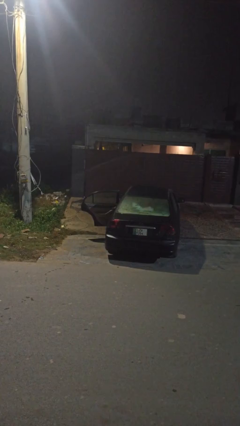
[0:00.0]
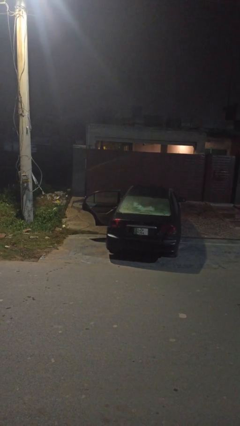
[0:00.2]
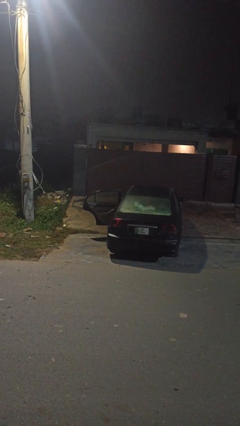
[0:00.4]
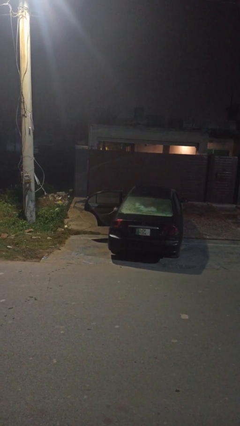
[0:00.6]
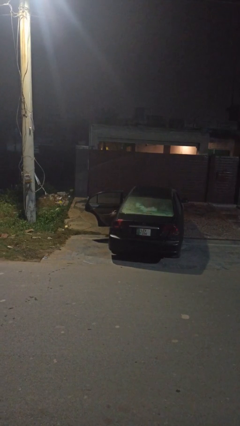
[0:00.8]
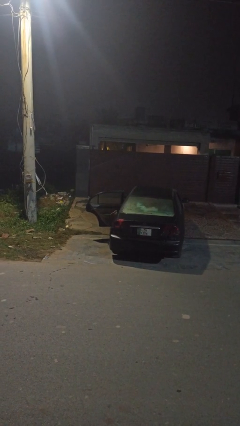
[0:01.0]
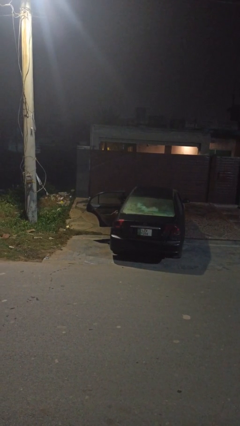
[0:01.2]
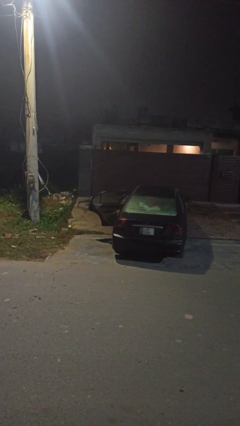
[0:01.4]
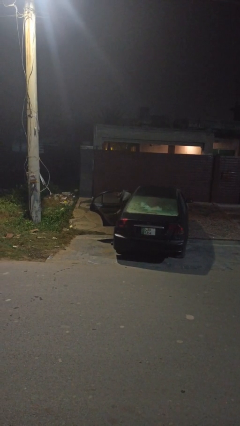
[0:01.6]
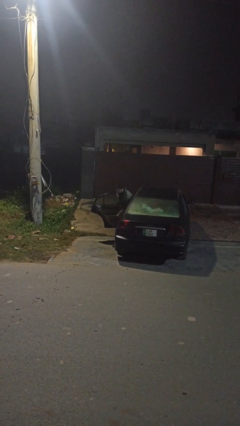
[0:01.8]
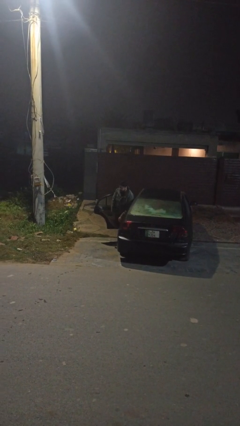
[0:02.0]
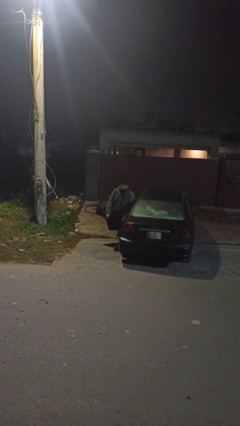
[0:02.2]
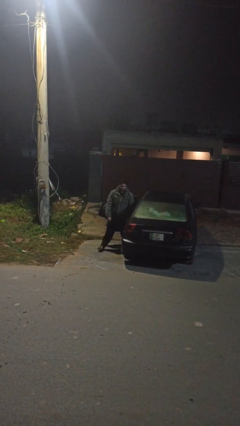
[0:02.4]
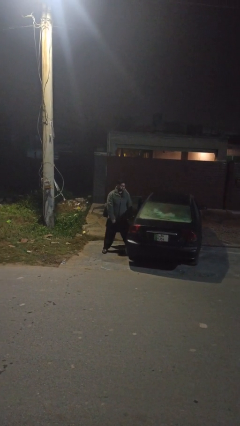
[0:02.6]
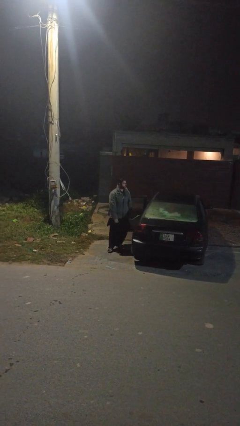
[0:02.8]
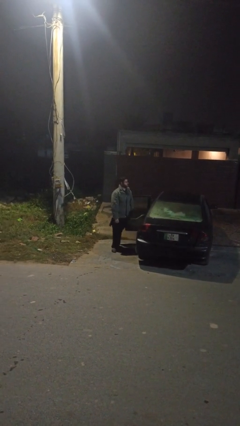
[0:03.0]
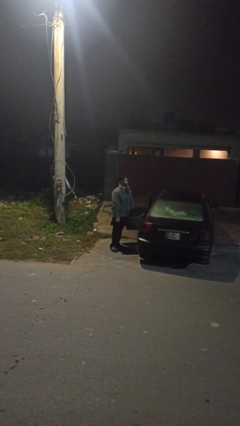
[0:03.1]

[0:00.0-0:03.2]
person exits car

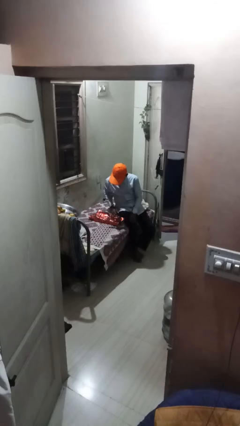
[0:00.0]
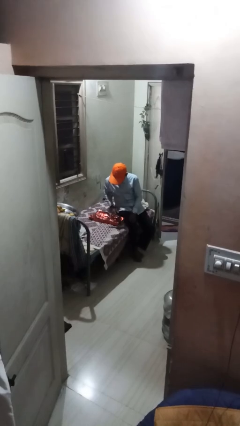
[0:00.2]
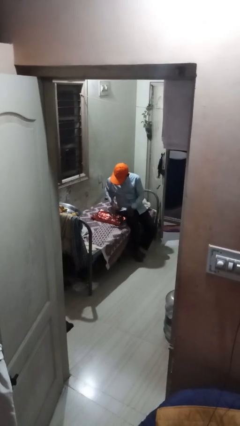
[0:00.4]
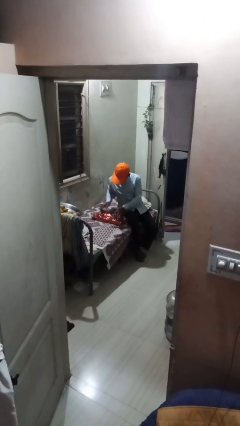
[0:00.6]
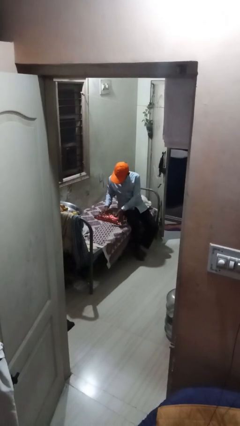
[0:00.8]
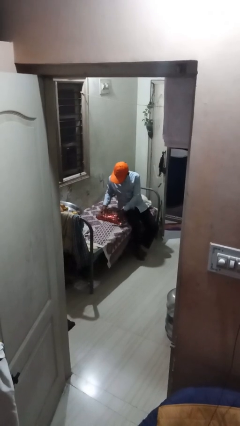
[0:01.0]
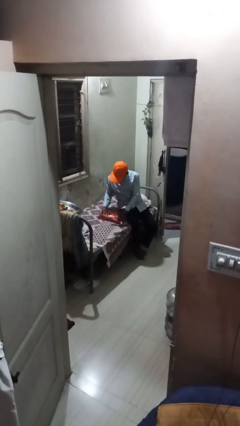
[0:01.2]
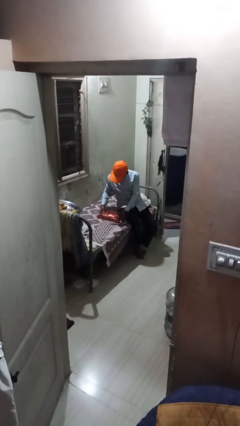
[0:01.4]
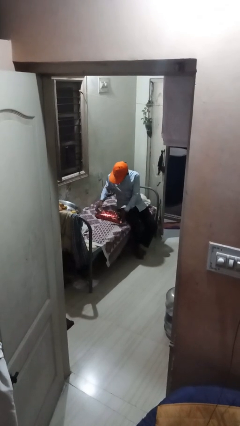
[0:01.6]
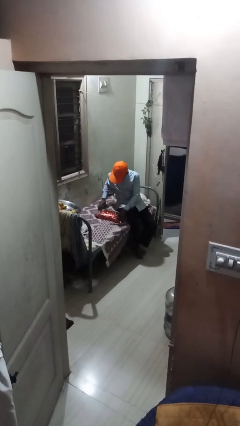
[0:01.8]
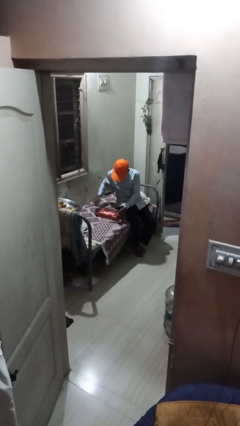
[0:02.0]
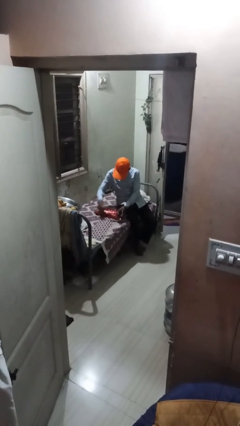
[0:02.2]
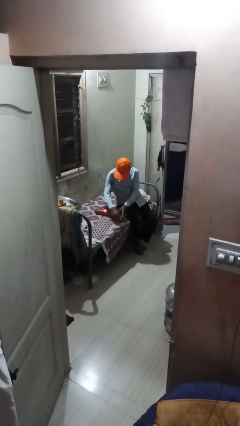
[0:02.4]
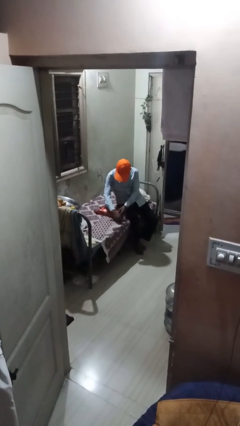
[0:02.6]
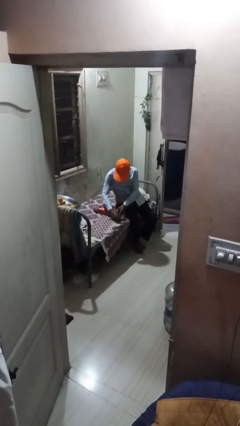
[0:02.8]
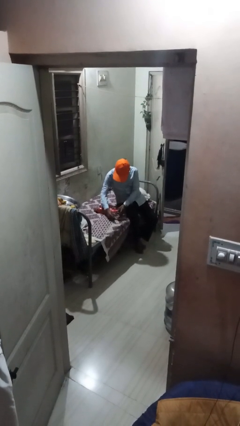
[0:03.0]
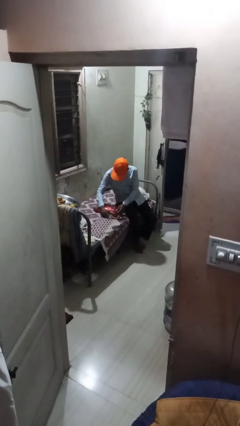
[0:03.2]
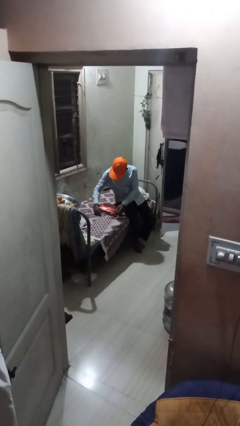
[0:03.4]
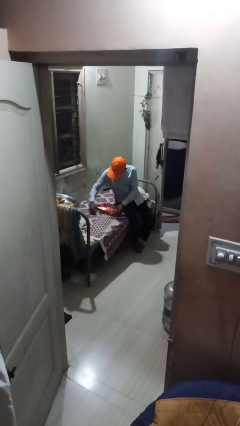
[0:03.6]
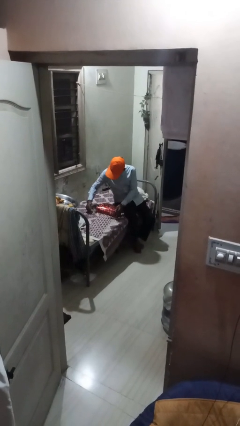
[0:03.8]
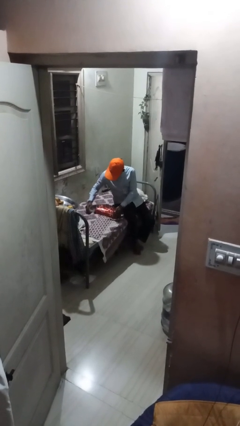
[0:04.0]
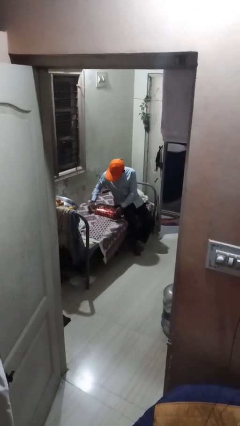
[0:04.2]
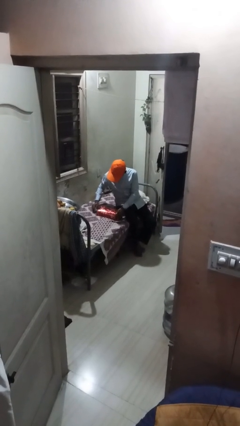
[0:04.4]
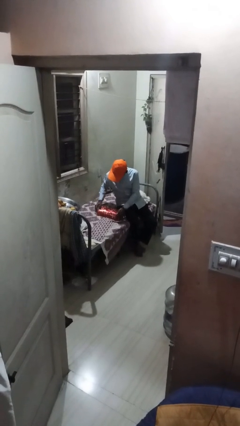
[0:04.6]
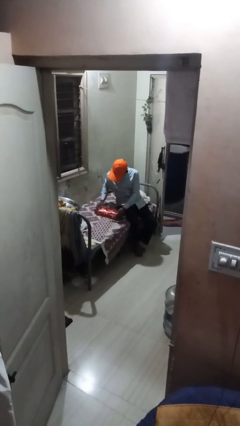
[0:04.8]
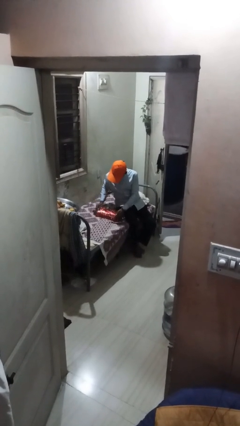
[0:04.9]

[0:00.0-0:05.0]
person wraps box

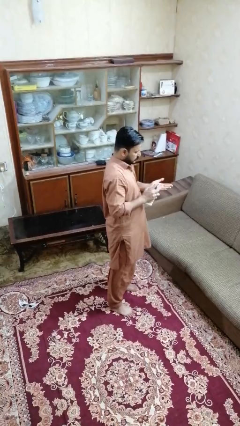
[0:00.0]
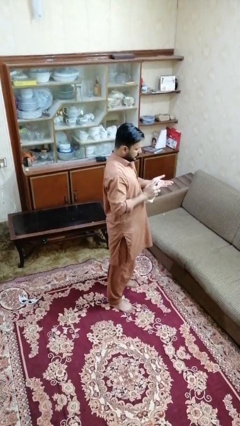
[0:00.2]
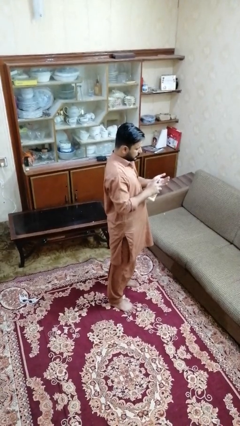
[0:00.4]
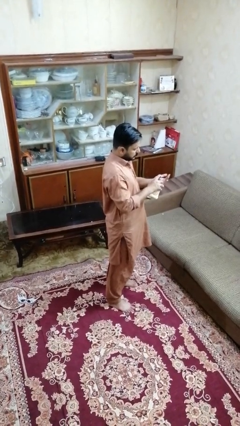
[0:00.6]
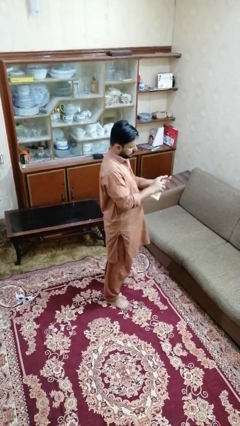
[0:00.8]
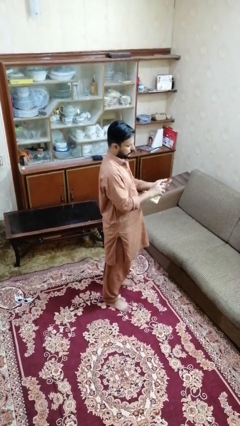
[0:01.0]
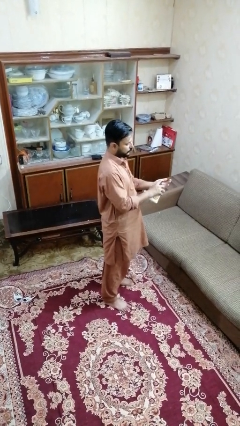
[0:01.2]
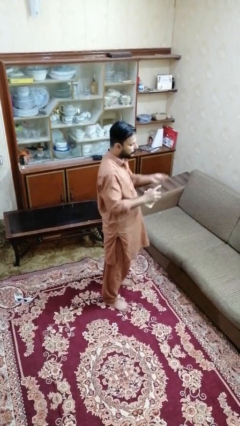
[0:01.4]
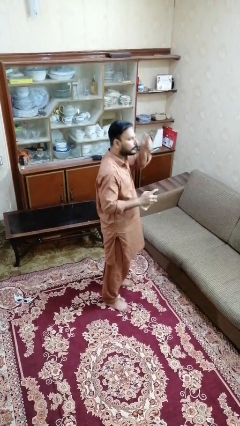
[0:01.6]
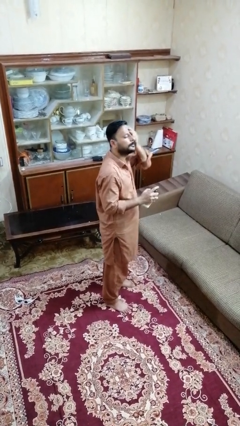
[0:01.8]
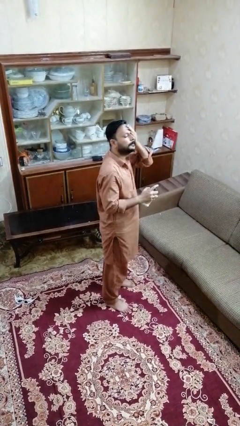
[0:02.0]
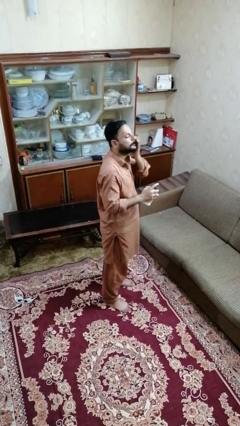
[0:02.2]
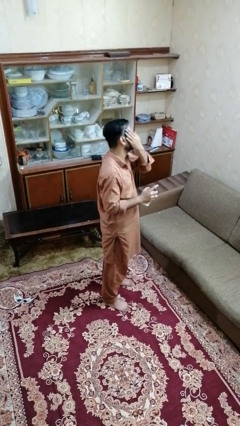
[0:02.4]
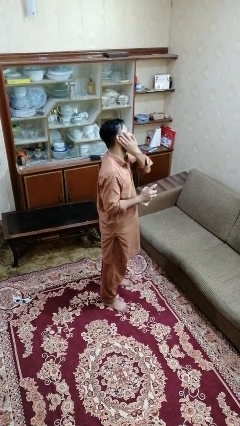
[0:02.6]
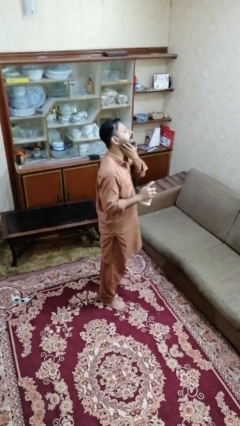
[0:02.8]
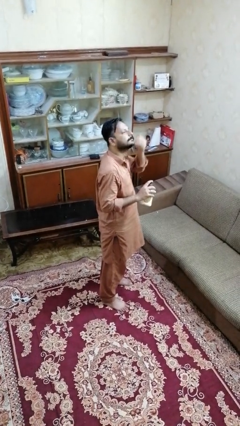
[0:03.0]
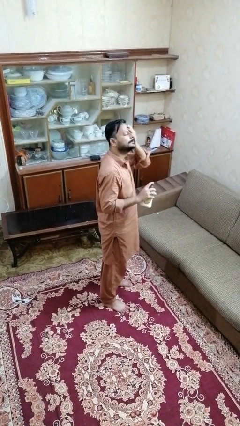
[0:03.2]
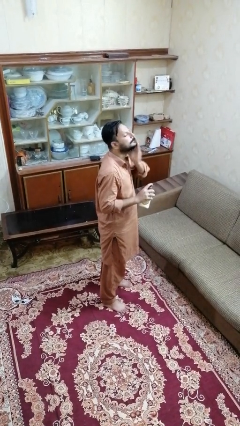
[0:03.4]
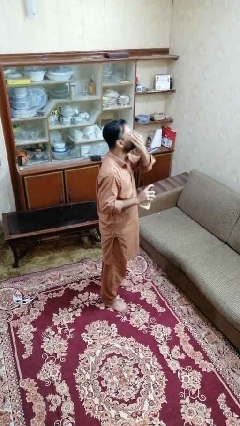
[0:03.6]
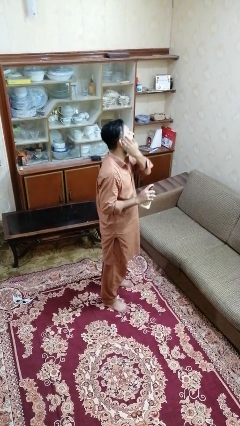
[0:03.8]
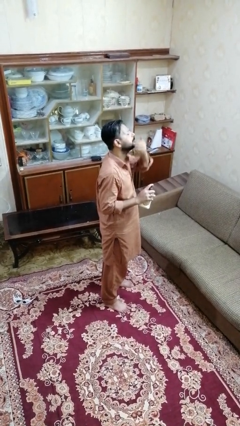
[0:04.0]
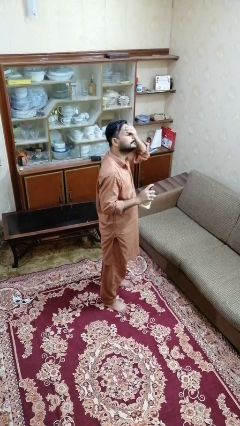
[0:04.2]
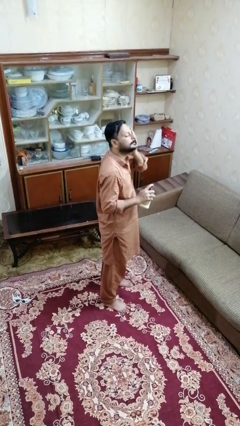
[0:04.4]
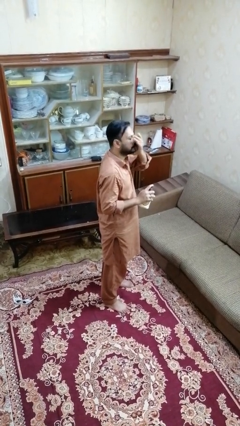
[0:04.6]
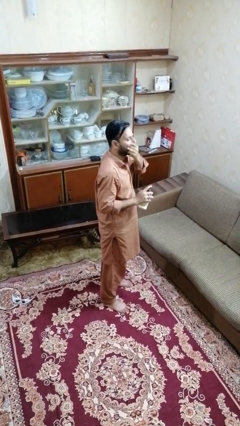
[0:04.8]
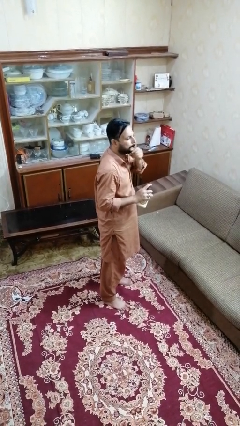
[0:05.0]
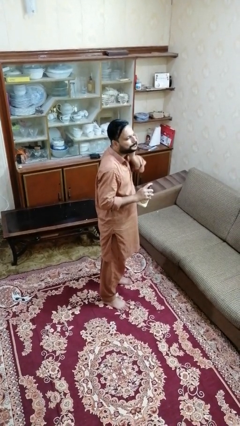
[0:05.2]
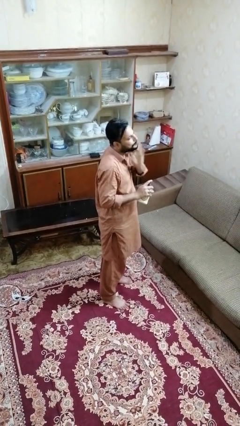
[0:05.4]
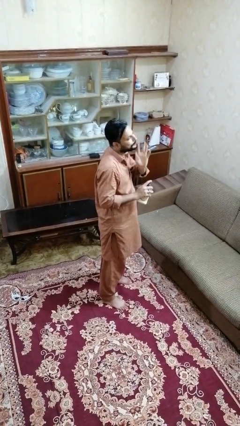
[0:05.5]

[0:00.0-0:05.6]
person applies facial moisturizer

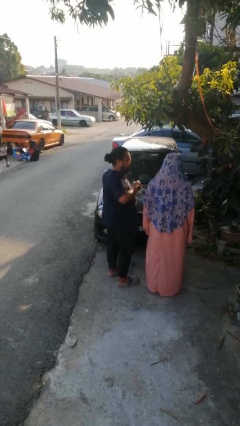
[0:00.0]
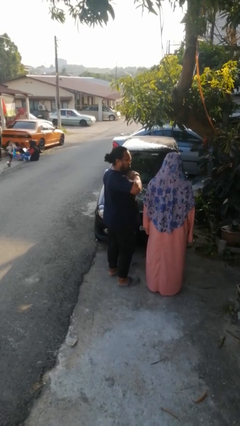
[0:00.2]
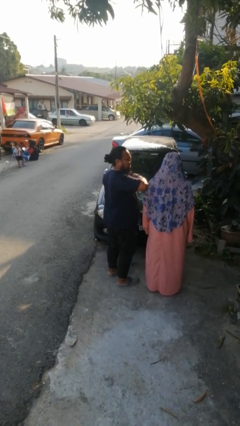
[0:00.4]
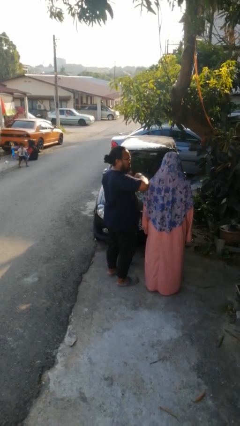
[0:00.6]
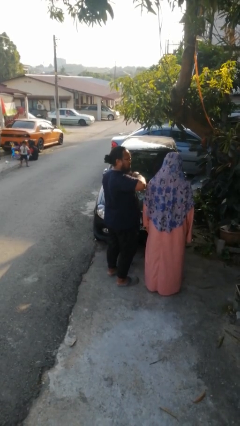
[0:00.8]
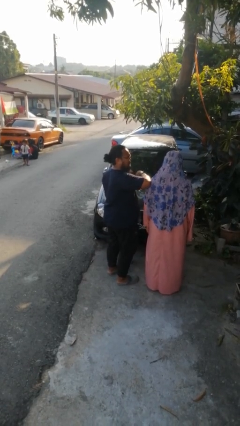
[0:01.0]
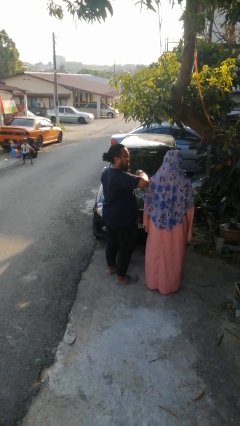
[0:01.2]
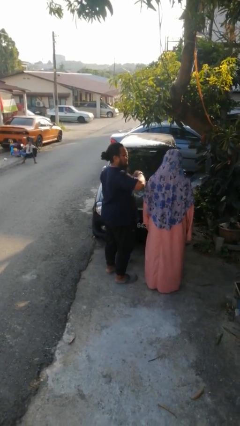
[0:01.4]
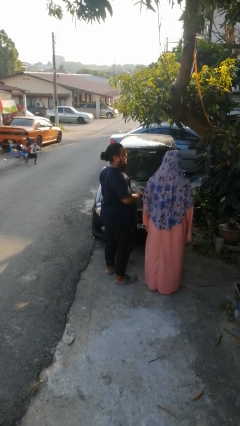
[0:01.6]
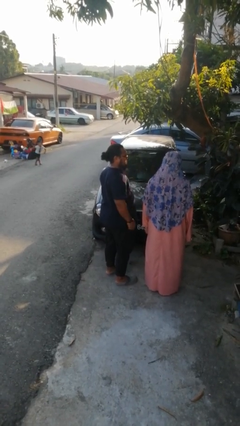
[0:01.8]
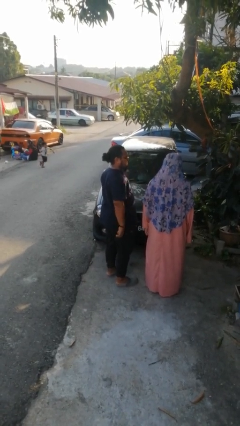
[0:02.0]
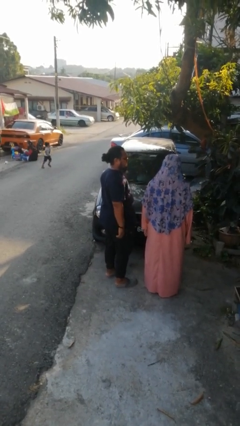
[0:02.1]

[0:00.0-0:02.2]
person nudges person with elbow

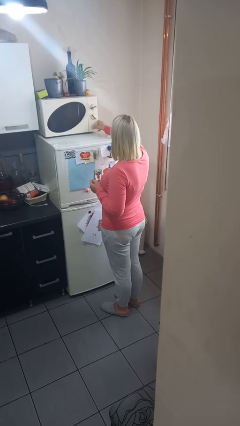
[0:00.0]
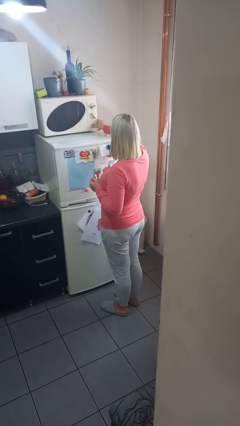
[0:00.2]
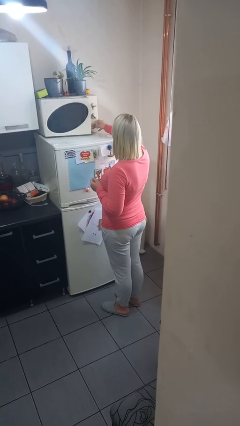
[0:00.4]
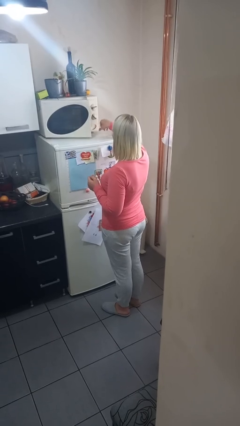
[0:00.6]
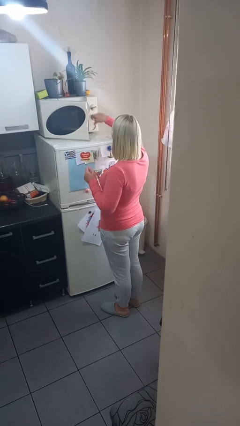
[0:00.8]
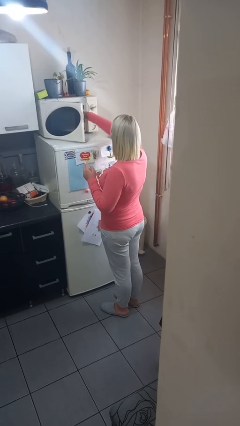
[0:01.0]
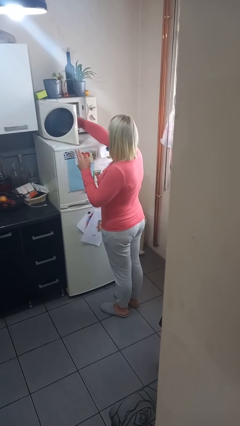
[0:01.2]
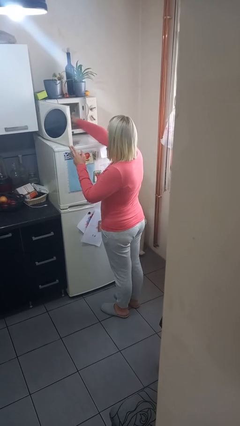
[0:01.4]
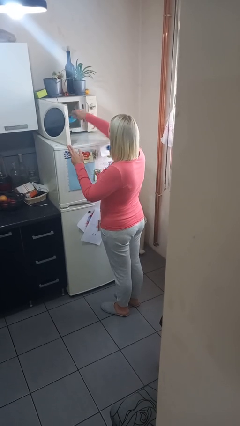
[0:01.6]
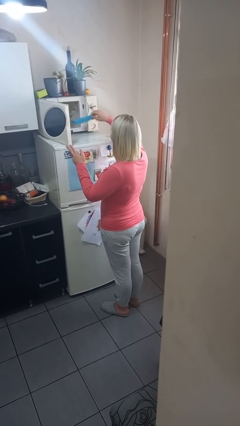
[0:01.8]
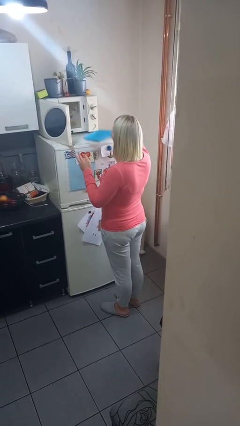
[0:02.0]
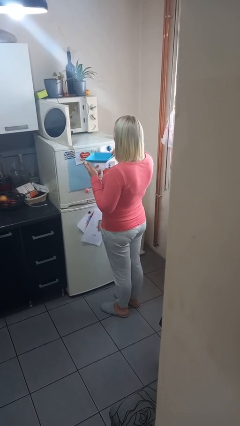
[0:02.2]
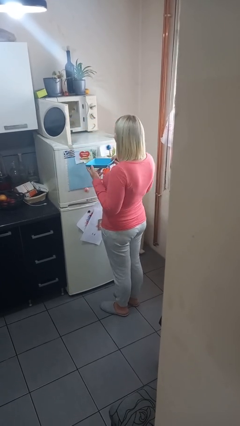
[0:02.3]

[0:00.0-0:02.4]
person takes object from microwave
